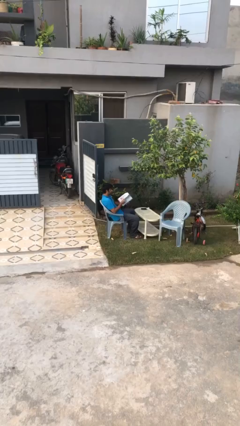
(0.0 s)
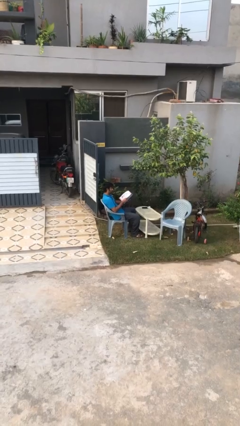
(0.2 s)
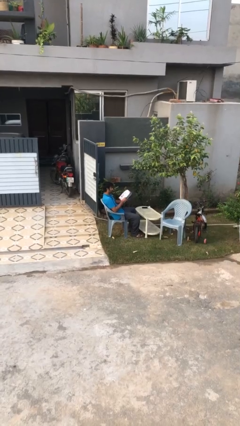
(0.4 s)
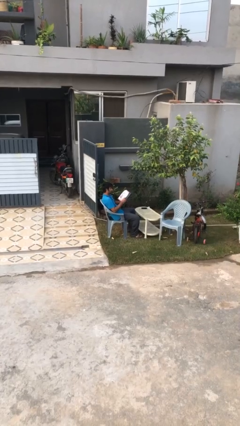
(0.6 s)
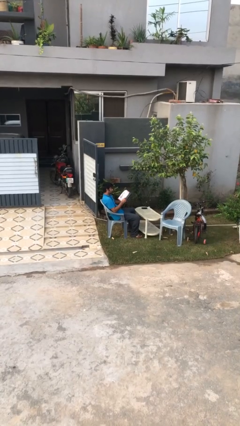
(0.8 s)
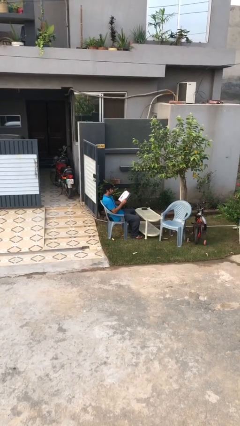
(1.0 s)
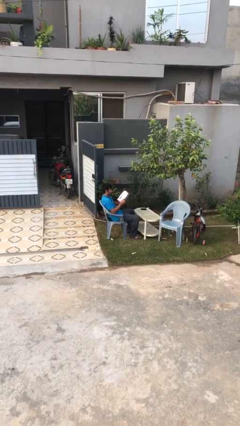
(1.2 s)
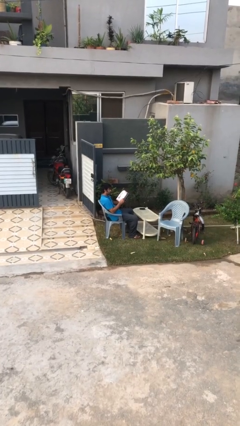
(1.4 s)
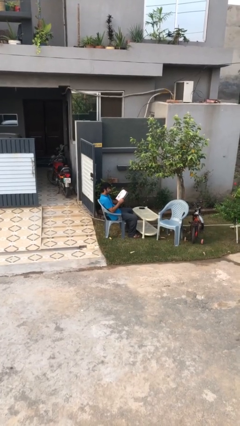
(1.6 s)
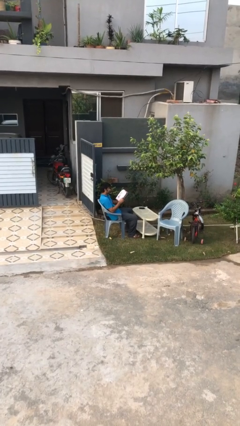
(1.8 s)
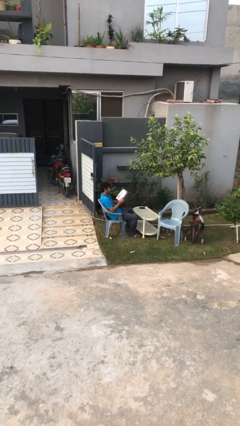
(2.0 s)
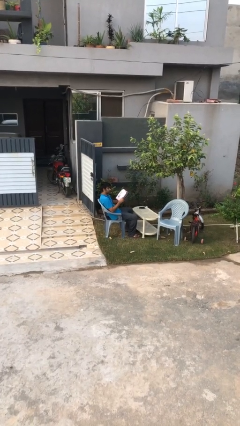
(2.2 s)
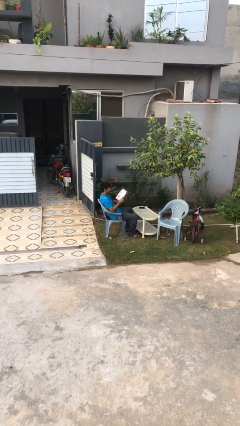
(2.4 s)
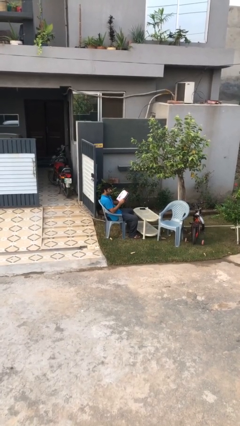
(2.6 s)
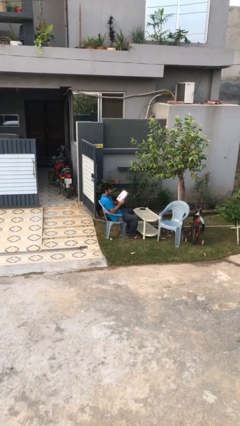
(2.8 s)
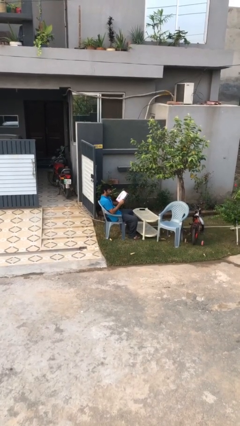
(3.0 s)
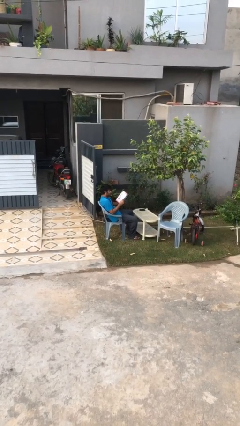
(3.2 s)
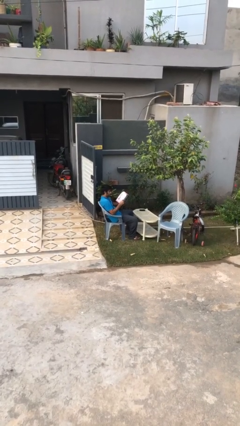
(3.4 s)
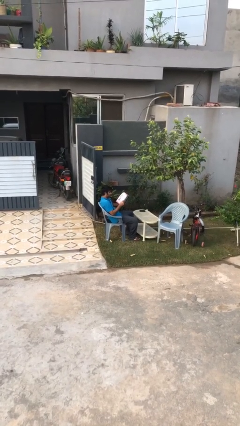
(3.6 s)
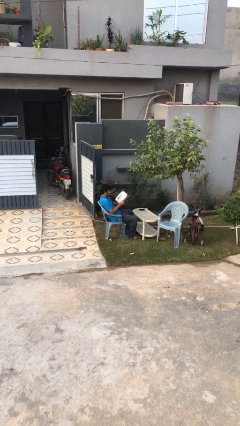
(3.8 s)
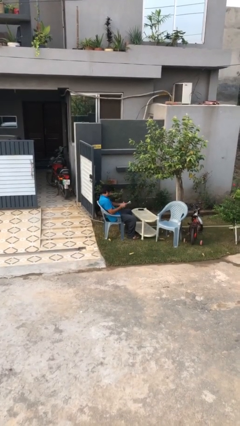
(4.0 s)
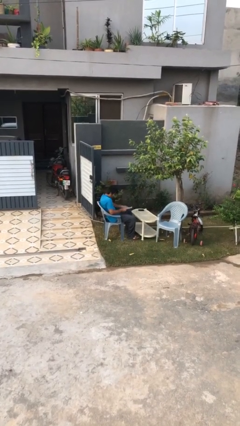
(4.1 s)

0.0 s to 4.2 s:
person reads document

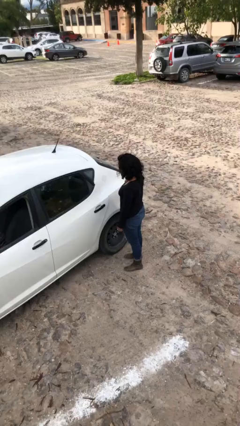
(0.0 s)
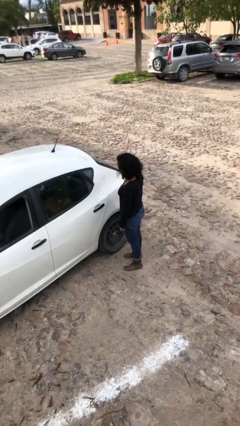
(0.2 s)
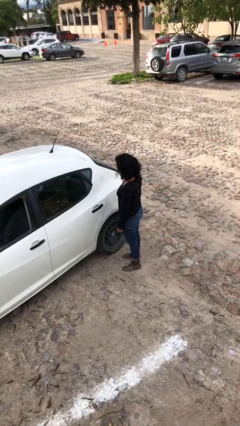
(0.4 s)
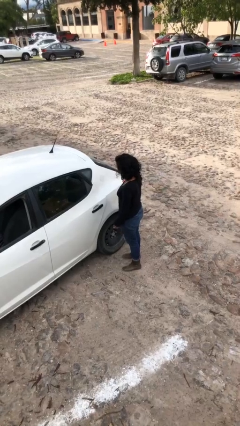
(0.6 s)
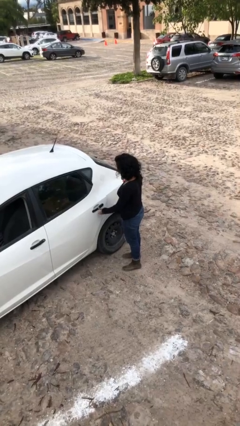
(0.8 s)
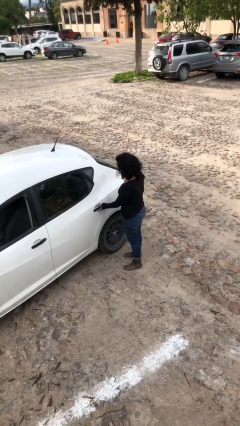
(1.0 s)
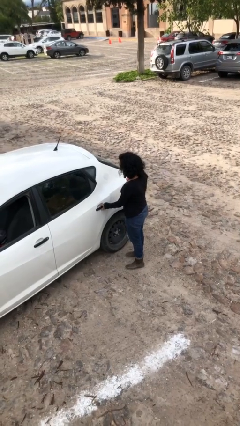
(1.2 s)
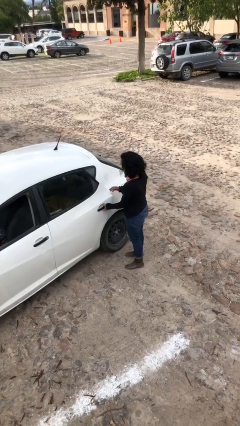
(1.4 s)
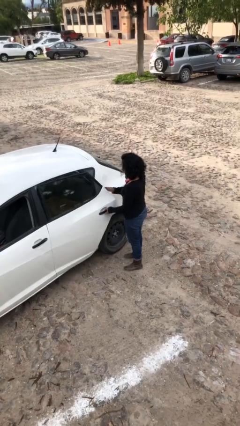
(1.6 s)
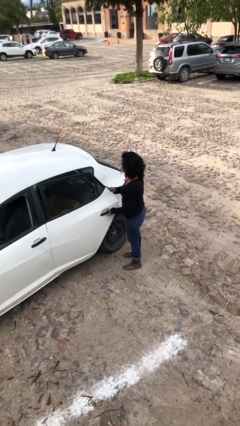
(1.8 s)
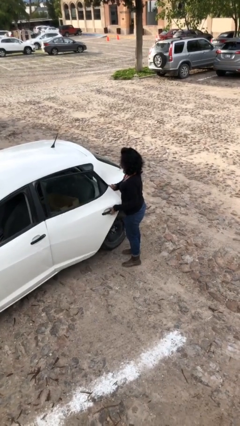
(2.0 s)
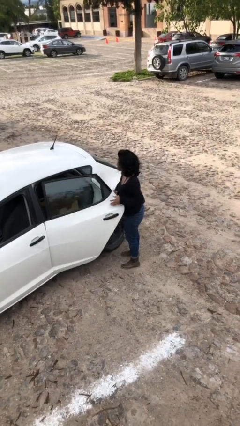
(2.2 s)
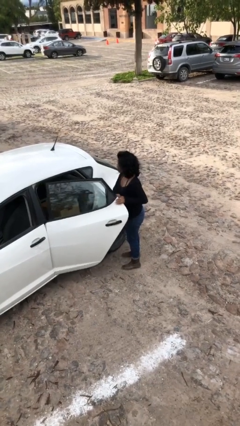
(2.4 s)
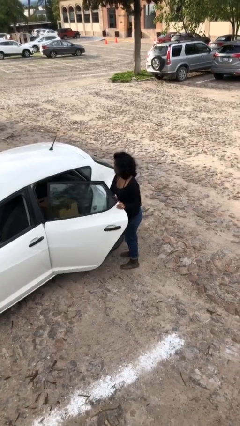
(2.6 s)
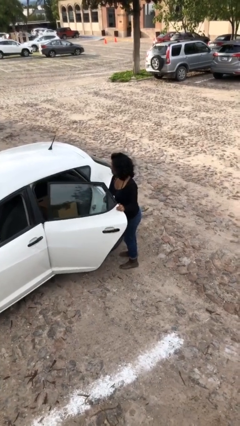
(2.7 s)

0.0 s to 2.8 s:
person opens car door

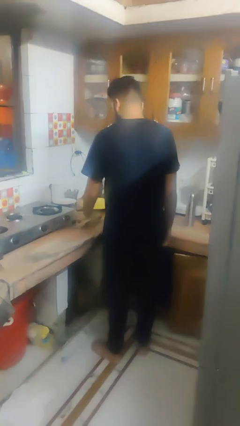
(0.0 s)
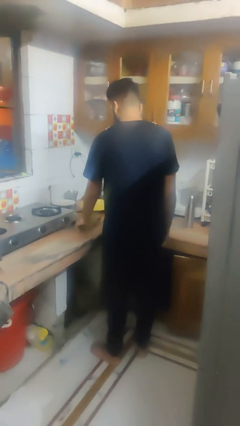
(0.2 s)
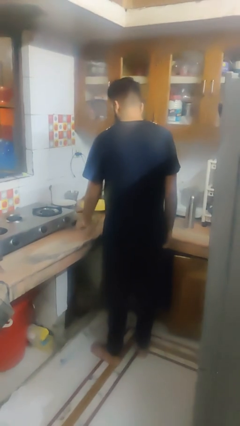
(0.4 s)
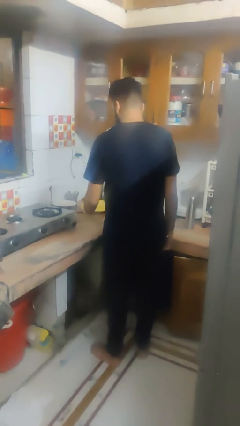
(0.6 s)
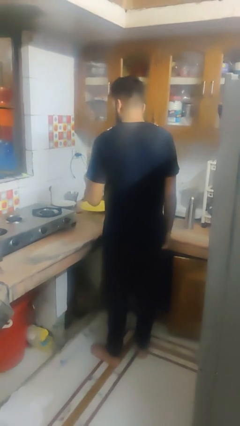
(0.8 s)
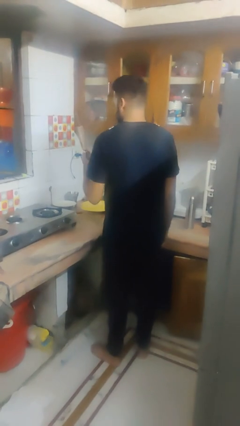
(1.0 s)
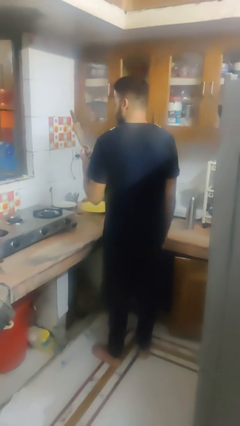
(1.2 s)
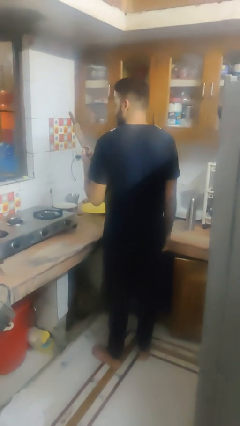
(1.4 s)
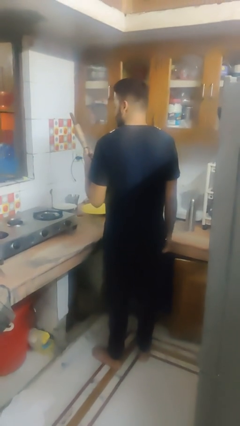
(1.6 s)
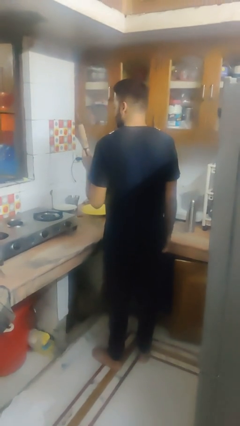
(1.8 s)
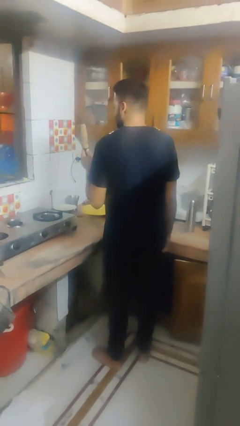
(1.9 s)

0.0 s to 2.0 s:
person picks up object from cabinet

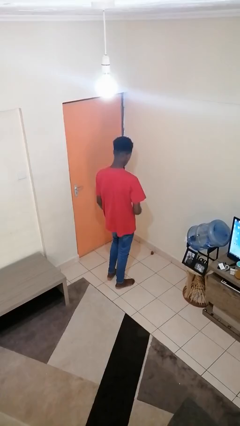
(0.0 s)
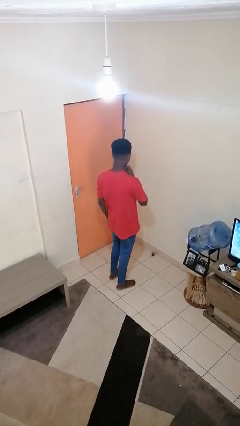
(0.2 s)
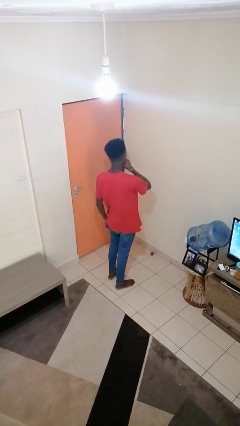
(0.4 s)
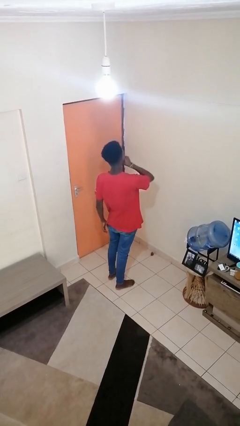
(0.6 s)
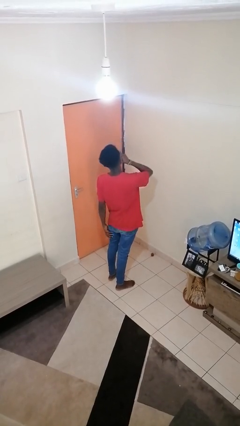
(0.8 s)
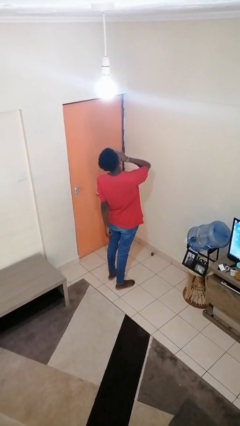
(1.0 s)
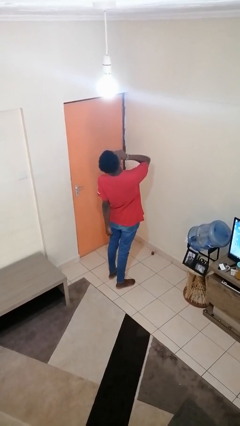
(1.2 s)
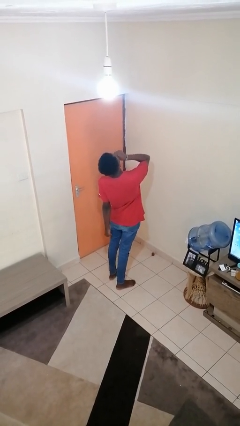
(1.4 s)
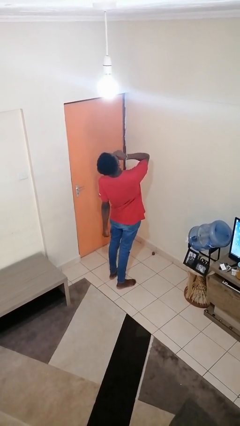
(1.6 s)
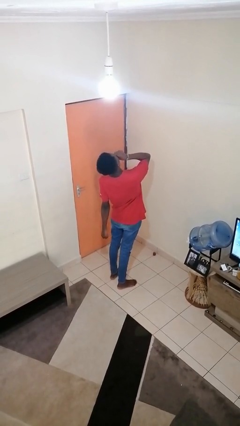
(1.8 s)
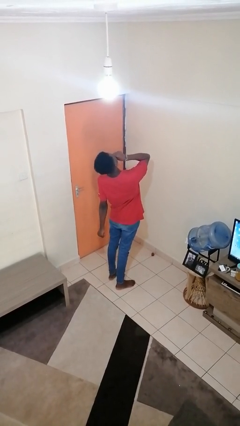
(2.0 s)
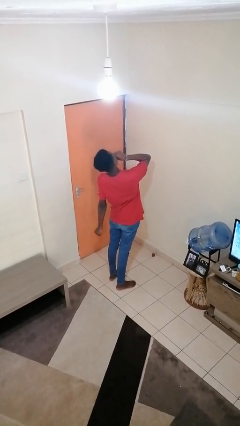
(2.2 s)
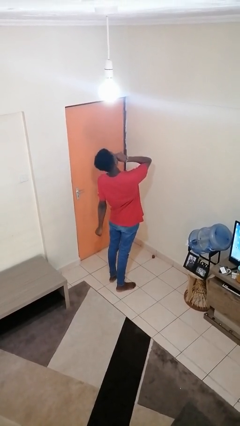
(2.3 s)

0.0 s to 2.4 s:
person yawns

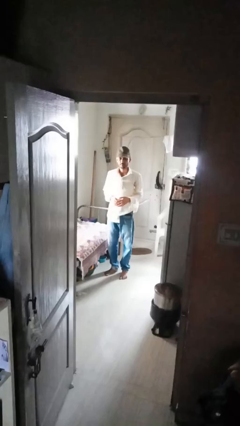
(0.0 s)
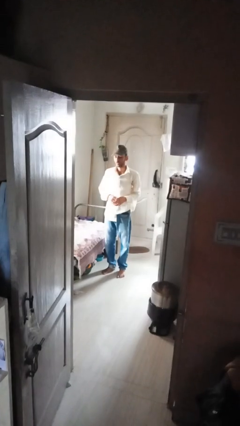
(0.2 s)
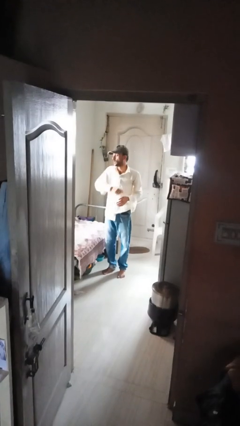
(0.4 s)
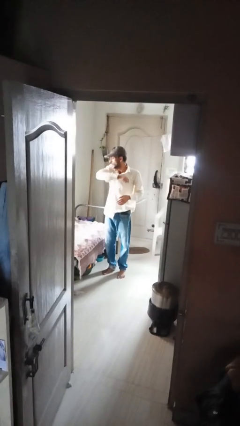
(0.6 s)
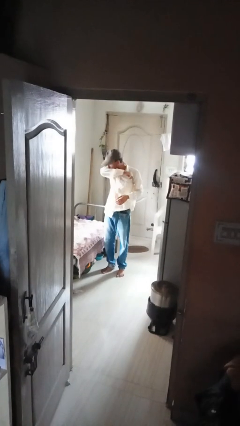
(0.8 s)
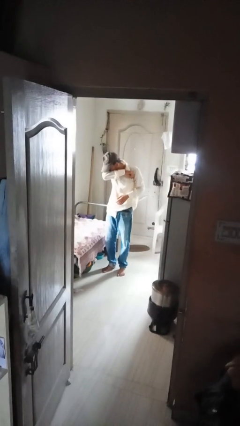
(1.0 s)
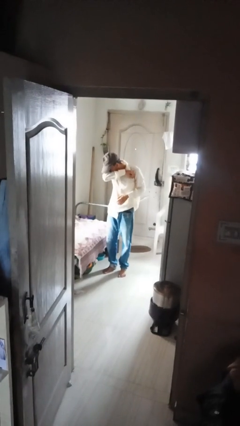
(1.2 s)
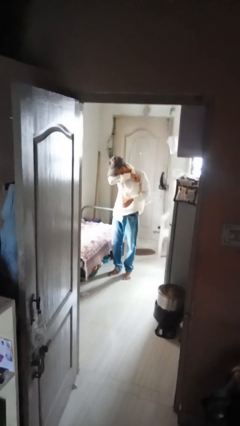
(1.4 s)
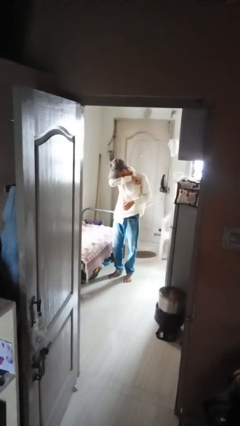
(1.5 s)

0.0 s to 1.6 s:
person sneezes into arm

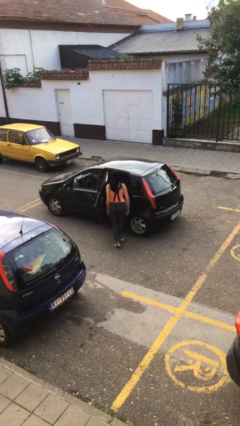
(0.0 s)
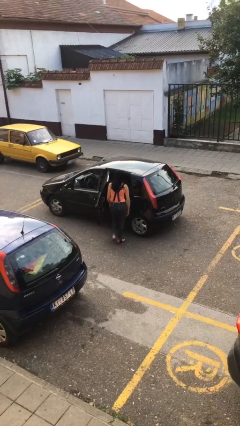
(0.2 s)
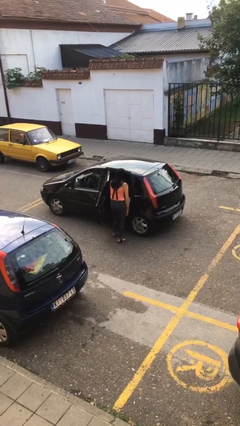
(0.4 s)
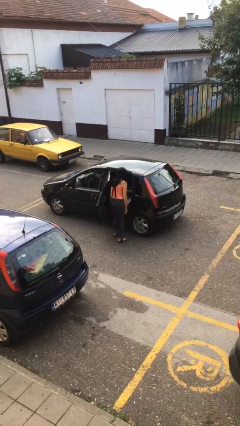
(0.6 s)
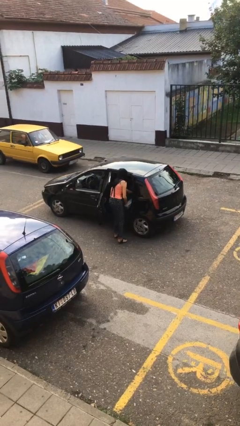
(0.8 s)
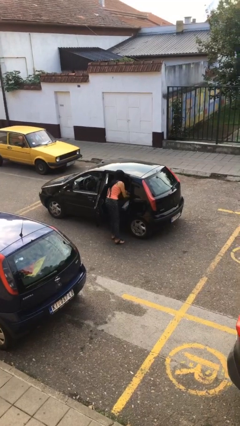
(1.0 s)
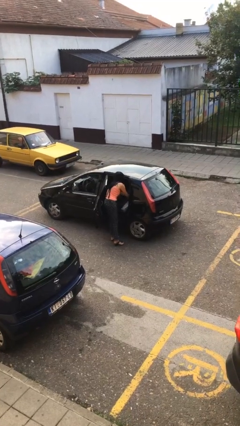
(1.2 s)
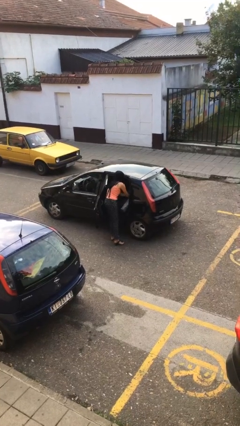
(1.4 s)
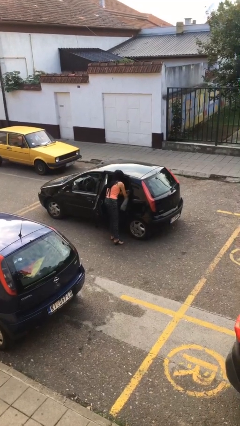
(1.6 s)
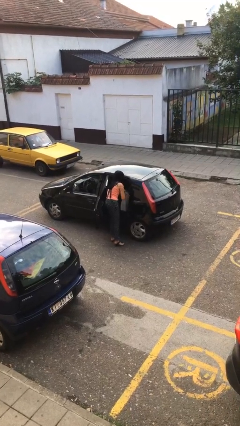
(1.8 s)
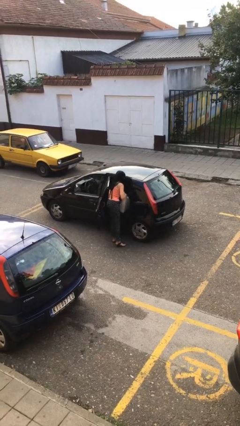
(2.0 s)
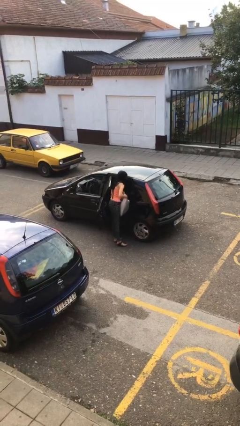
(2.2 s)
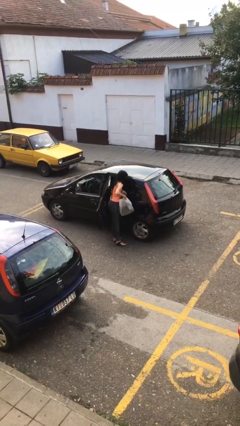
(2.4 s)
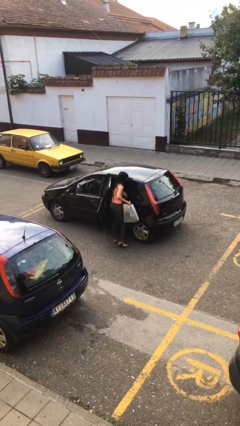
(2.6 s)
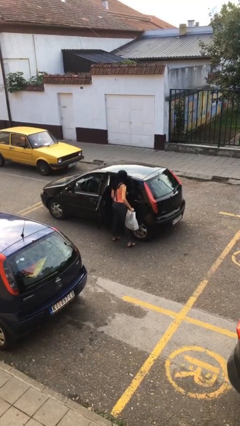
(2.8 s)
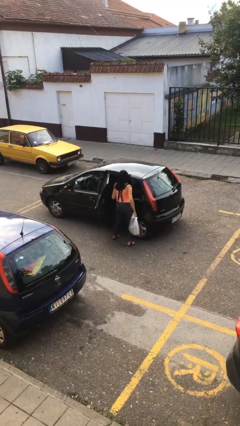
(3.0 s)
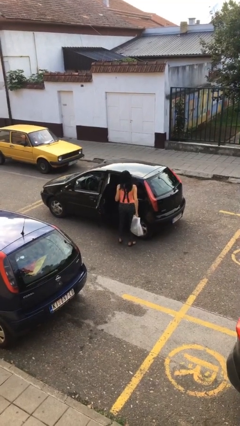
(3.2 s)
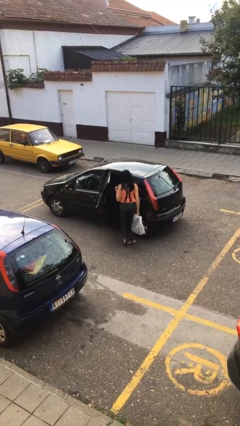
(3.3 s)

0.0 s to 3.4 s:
person unloads car

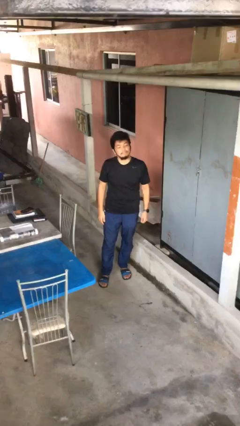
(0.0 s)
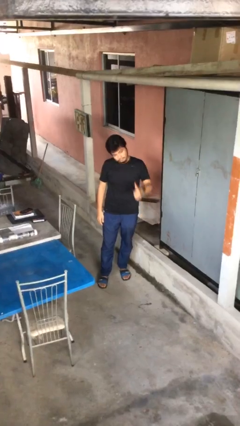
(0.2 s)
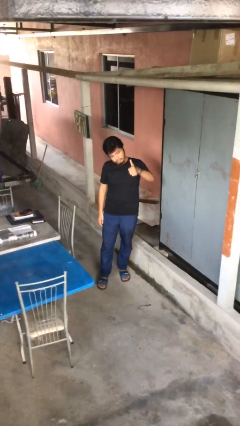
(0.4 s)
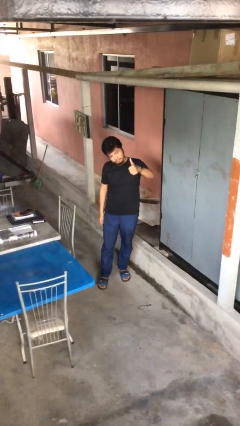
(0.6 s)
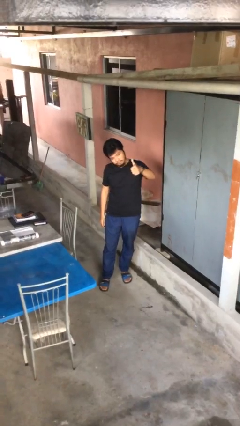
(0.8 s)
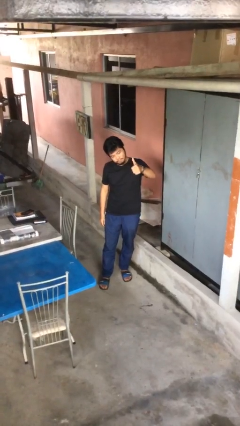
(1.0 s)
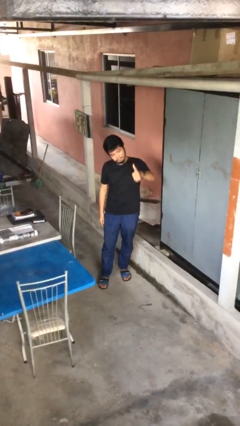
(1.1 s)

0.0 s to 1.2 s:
person gestures thumbs up
